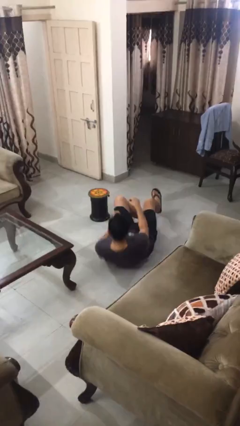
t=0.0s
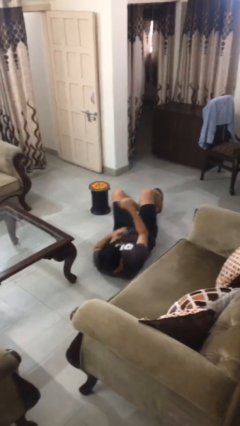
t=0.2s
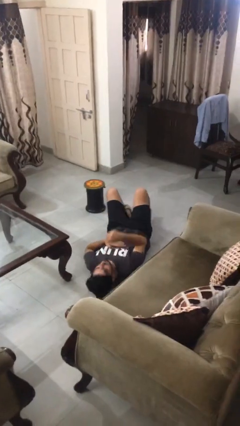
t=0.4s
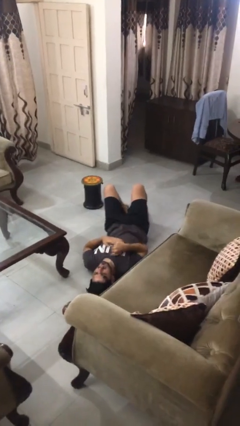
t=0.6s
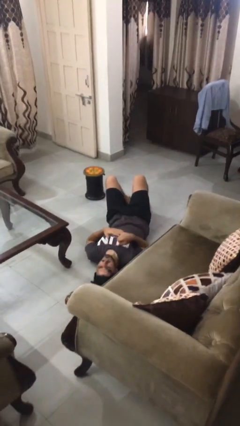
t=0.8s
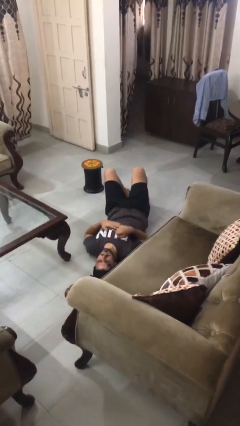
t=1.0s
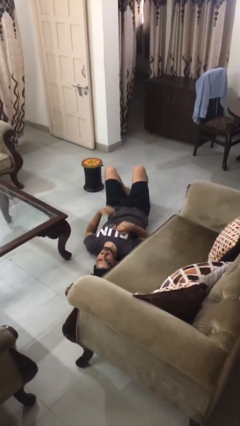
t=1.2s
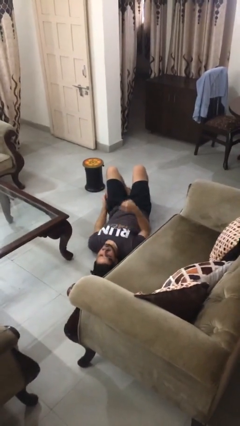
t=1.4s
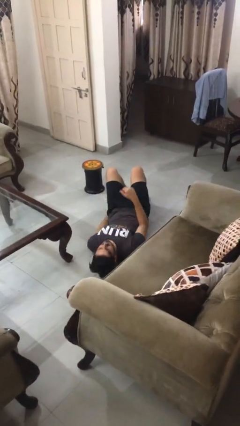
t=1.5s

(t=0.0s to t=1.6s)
person lies down on floor

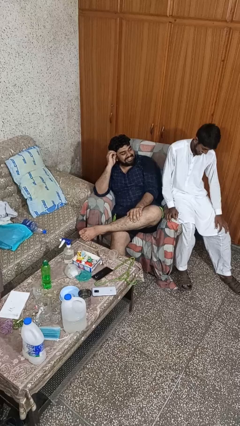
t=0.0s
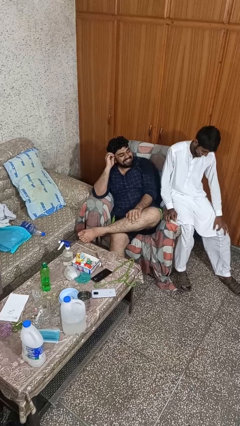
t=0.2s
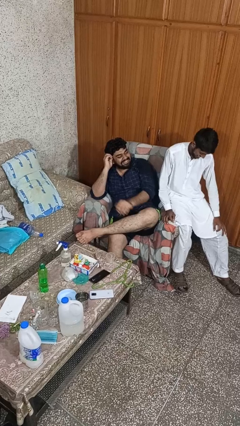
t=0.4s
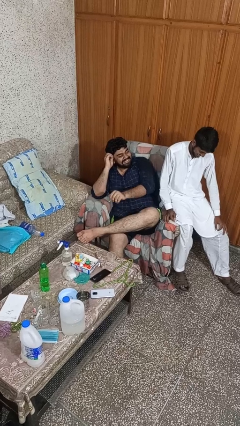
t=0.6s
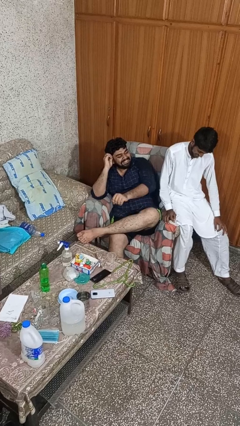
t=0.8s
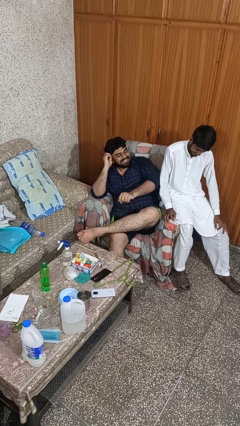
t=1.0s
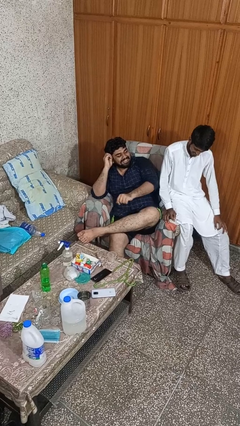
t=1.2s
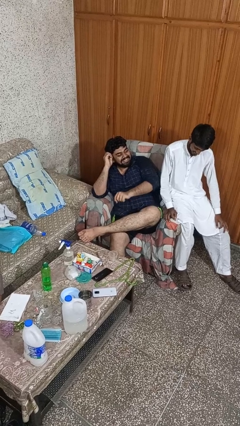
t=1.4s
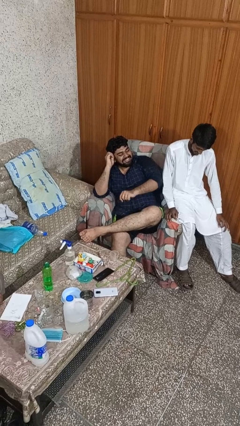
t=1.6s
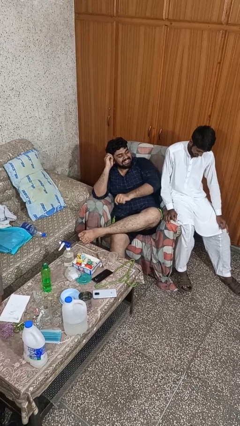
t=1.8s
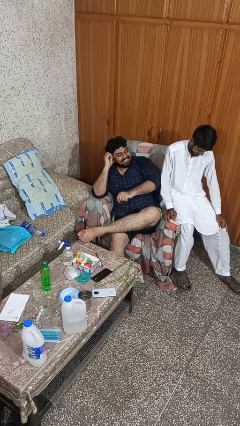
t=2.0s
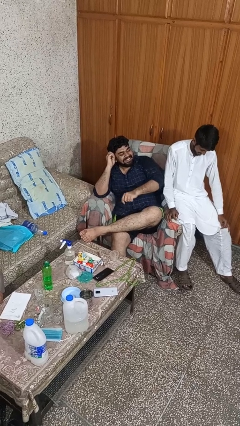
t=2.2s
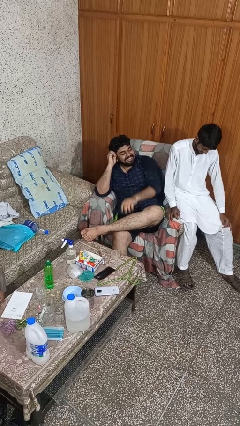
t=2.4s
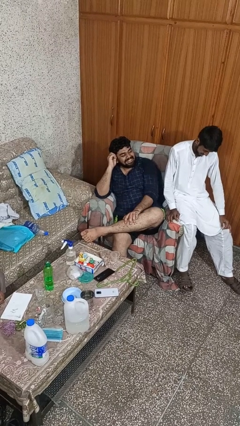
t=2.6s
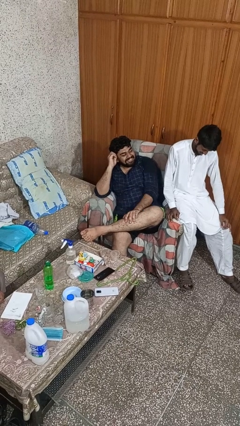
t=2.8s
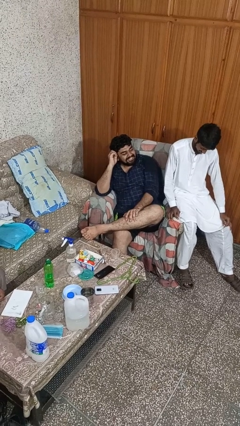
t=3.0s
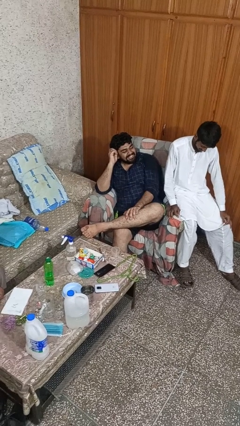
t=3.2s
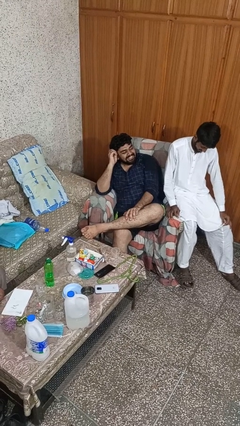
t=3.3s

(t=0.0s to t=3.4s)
person nudges person with elbow

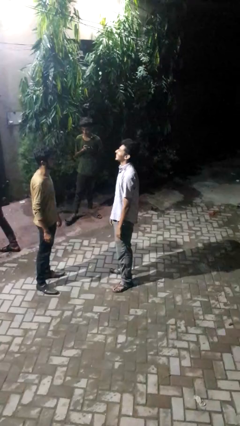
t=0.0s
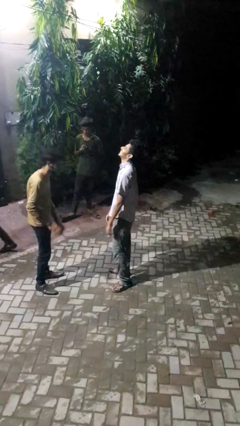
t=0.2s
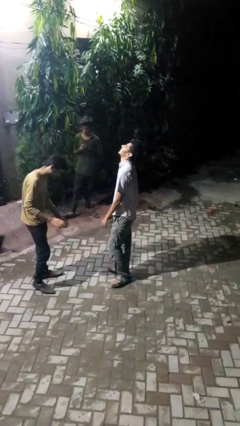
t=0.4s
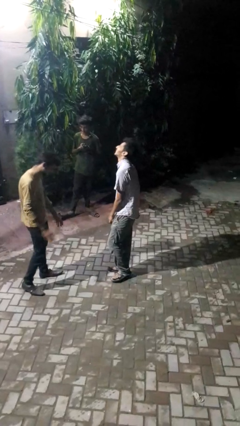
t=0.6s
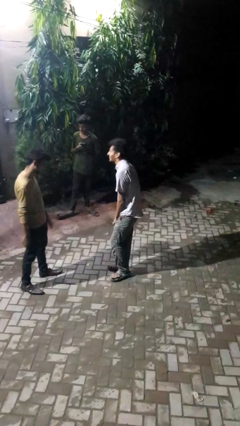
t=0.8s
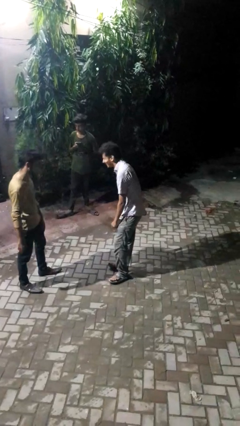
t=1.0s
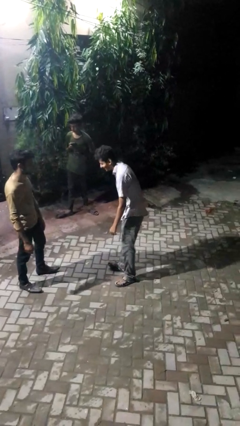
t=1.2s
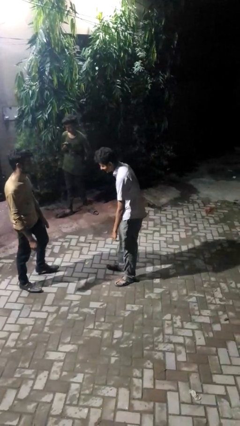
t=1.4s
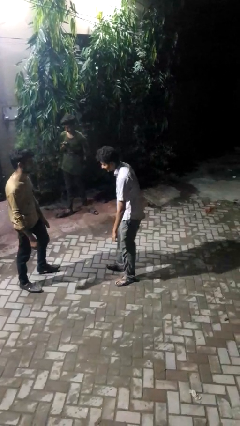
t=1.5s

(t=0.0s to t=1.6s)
person laughs with person

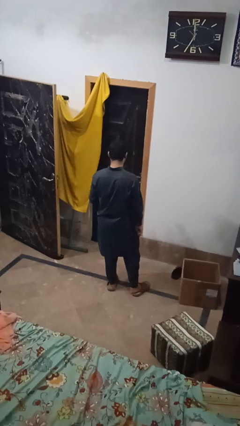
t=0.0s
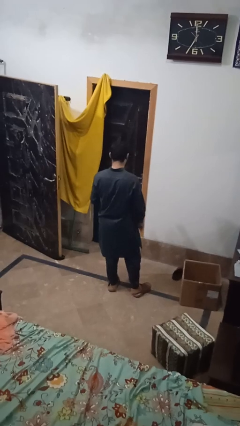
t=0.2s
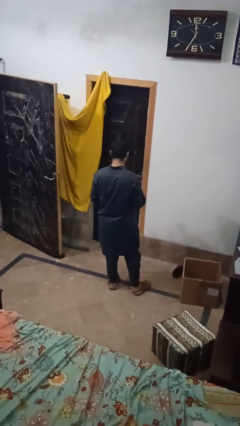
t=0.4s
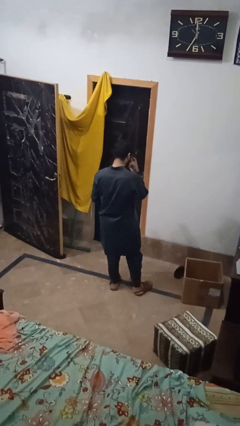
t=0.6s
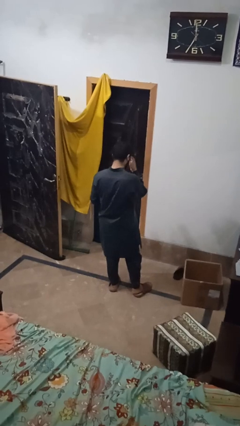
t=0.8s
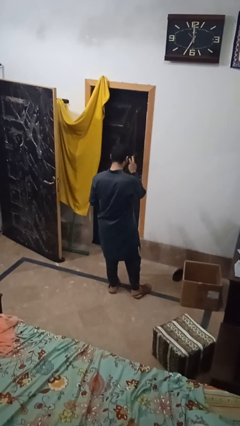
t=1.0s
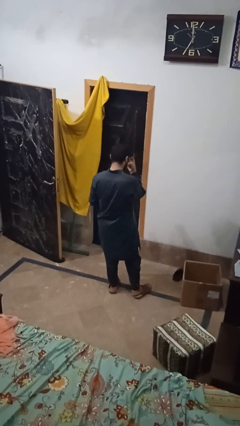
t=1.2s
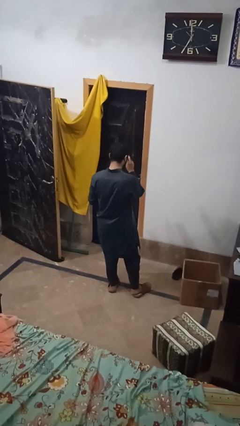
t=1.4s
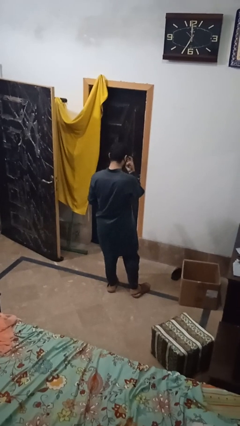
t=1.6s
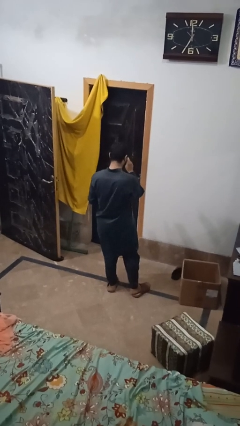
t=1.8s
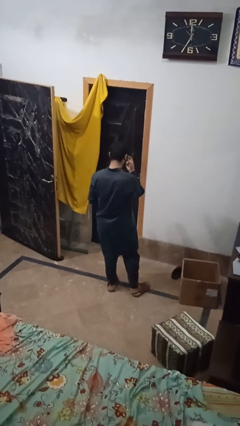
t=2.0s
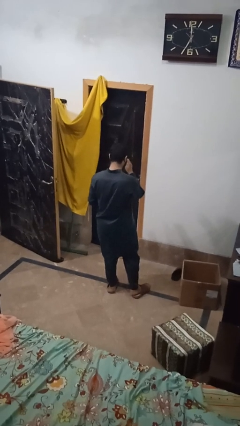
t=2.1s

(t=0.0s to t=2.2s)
person gestures watch closely

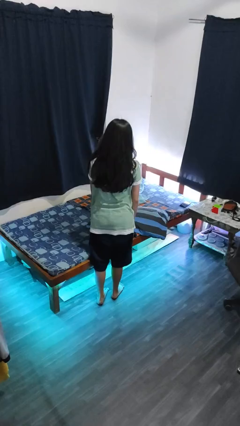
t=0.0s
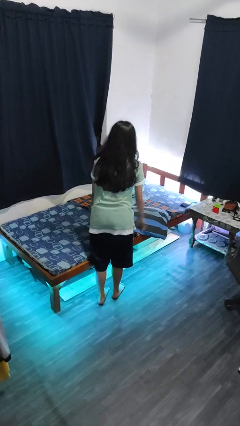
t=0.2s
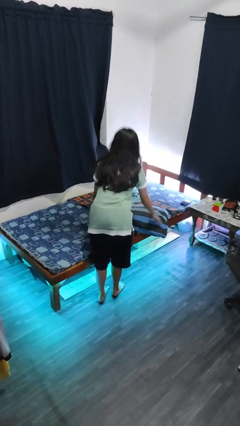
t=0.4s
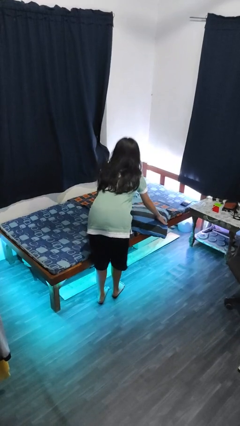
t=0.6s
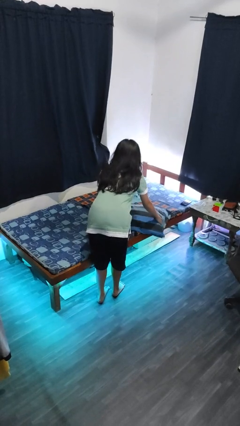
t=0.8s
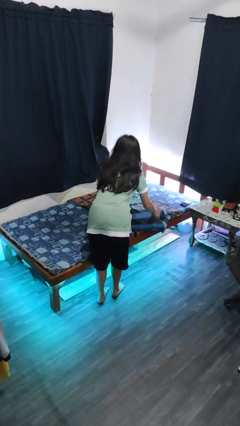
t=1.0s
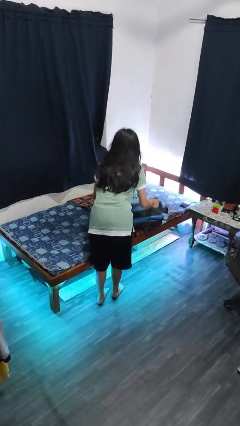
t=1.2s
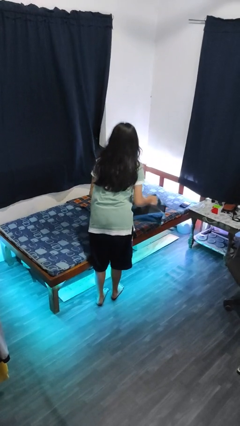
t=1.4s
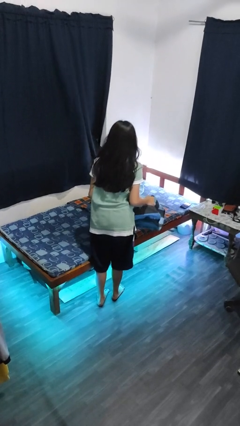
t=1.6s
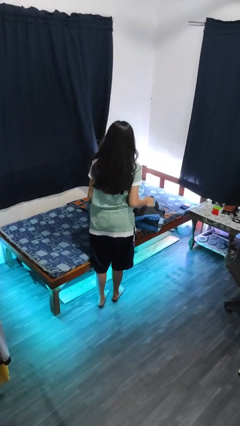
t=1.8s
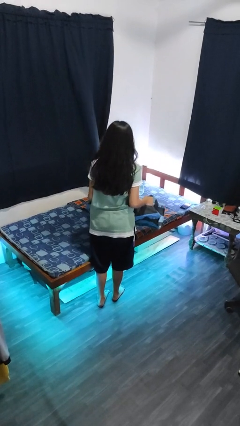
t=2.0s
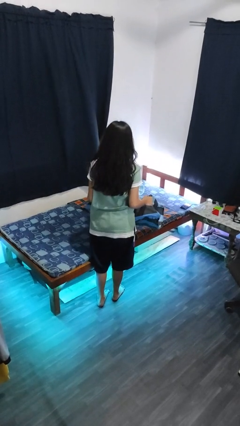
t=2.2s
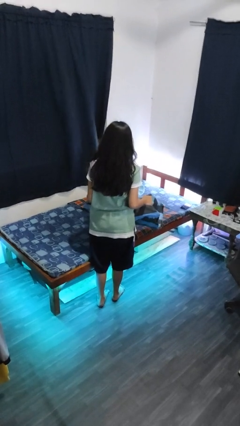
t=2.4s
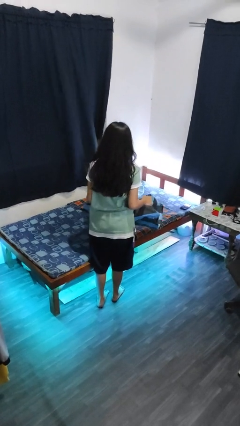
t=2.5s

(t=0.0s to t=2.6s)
person picks up object from bed

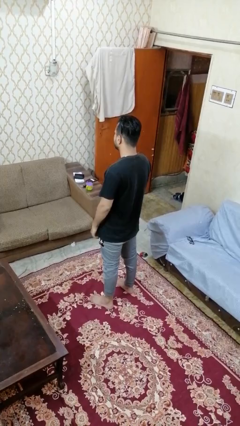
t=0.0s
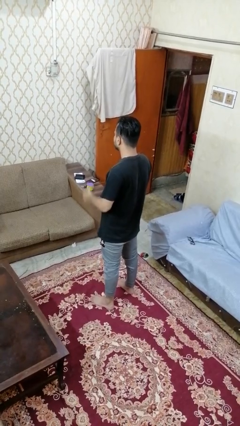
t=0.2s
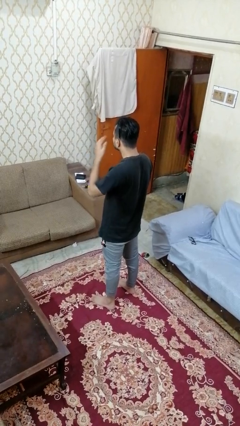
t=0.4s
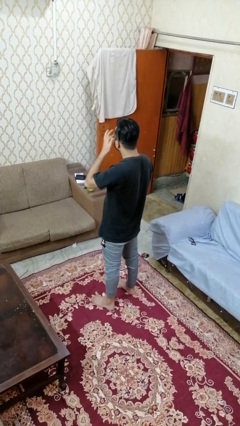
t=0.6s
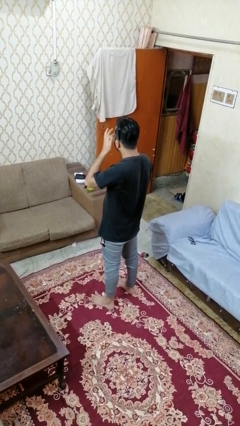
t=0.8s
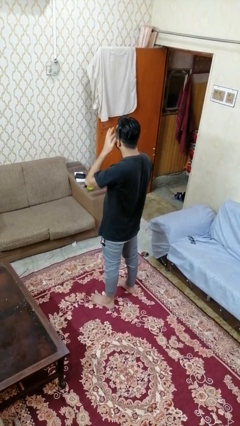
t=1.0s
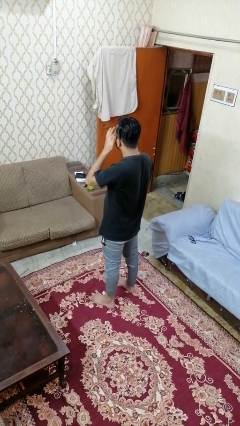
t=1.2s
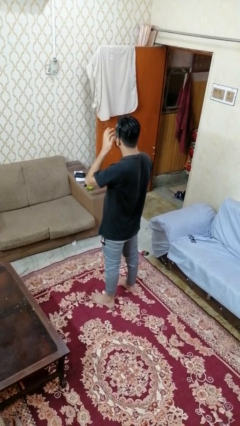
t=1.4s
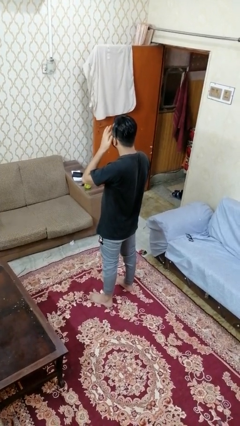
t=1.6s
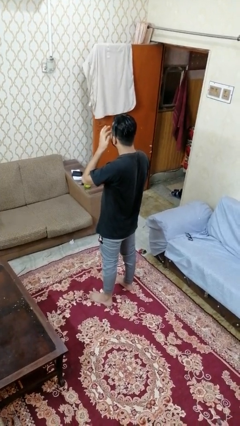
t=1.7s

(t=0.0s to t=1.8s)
person rubs eyes

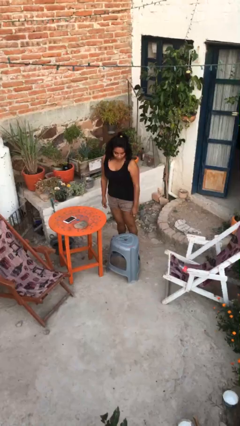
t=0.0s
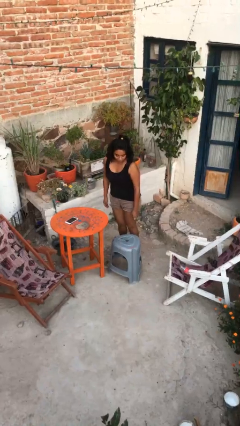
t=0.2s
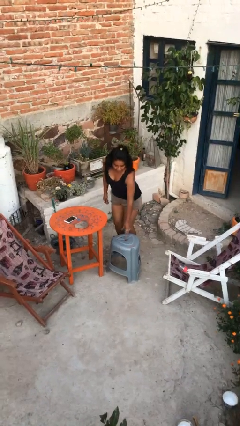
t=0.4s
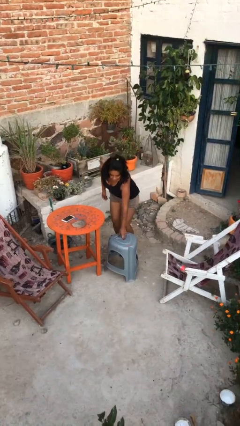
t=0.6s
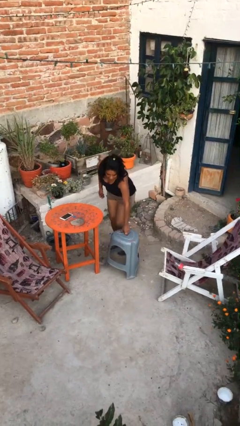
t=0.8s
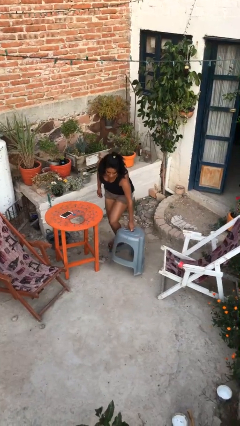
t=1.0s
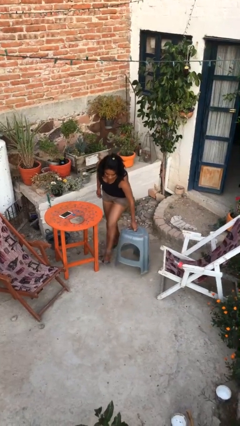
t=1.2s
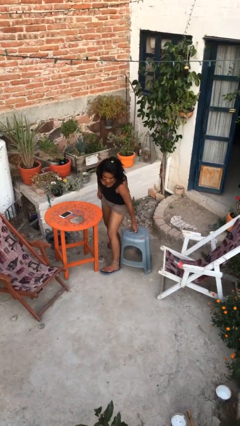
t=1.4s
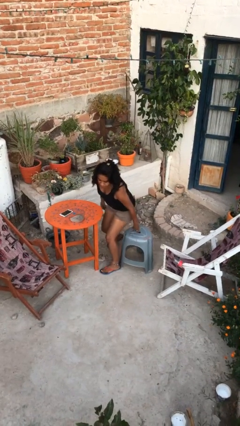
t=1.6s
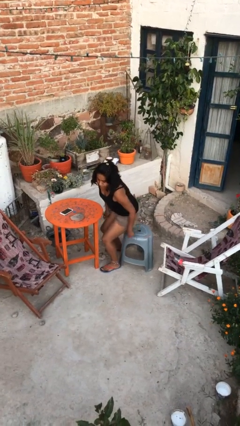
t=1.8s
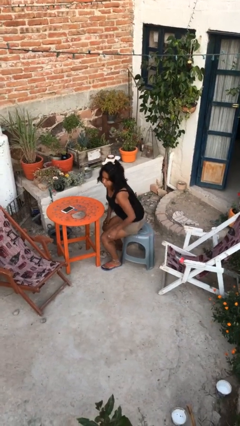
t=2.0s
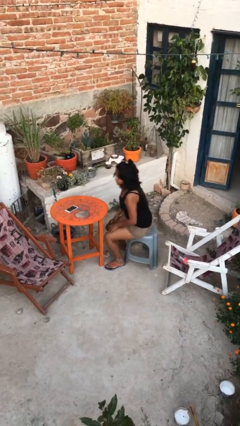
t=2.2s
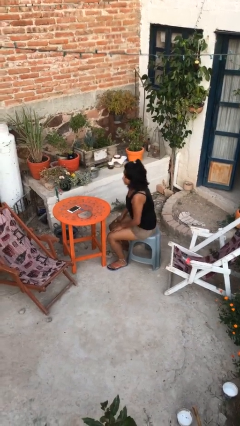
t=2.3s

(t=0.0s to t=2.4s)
person sits down

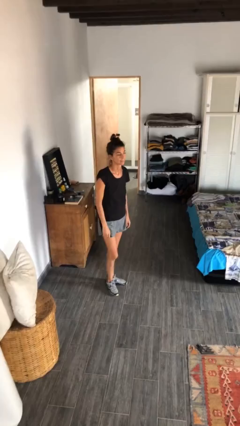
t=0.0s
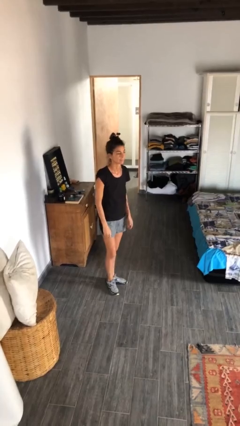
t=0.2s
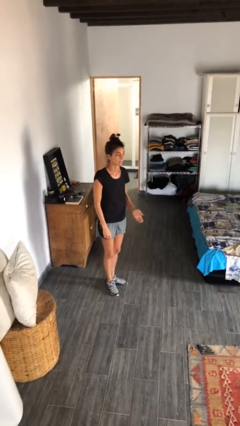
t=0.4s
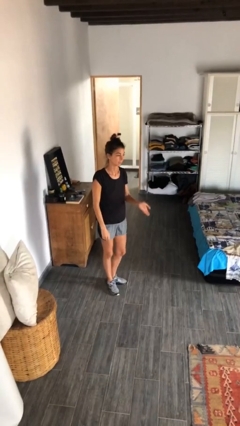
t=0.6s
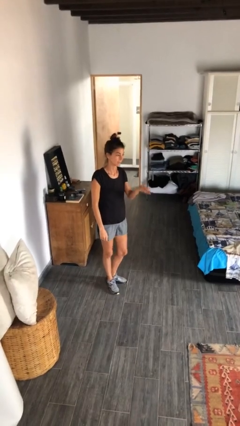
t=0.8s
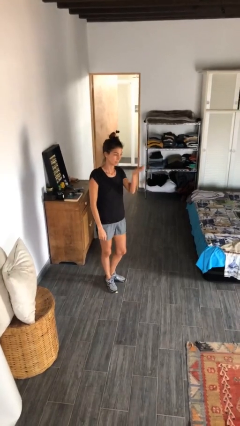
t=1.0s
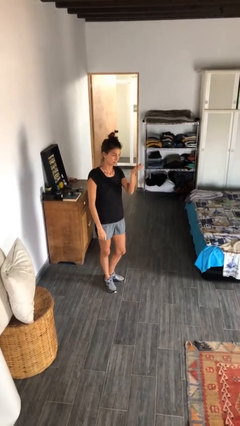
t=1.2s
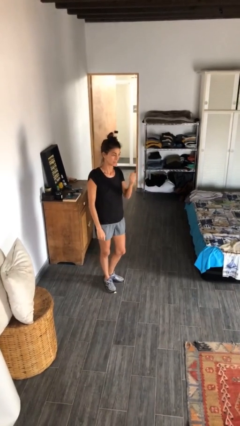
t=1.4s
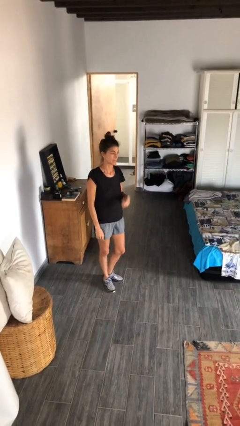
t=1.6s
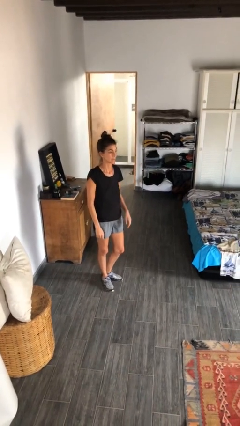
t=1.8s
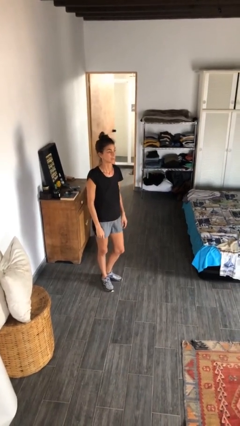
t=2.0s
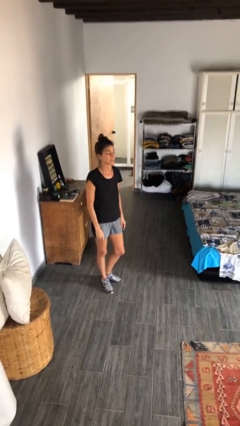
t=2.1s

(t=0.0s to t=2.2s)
person gestures swipe up
